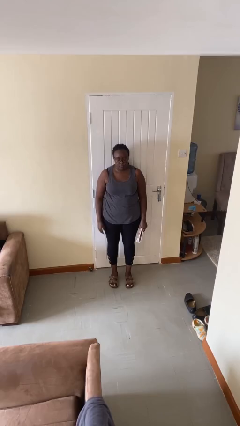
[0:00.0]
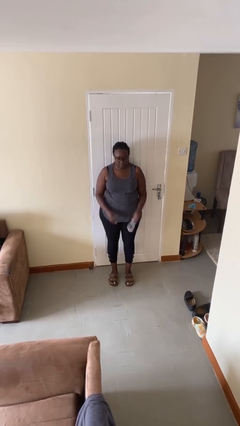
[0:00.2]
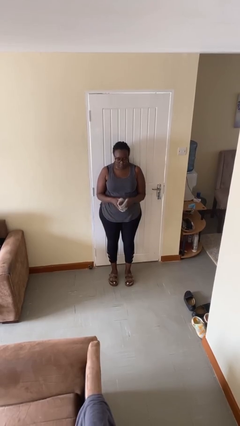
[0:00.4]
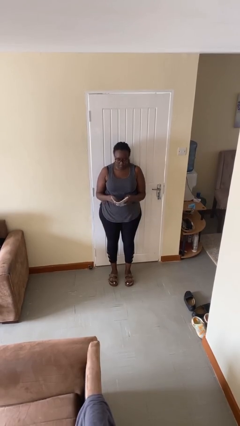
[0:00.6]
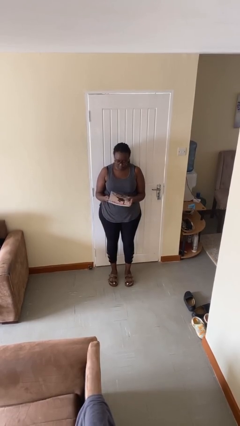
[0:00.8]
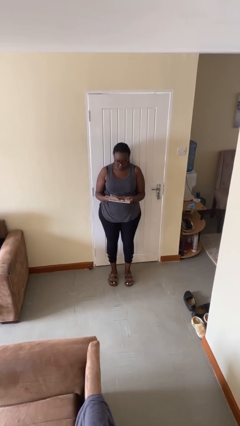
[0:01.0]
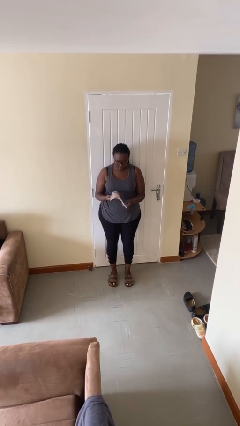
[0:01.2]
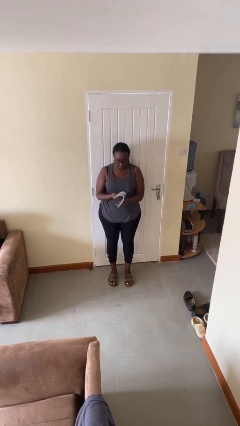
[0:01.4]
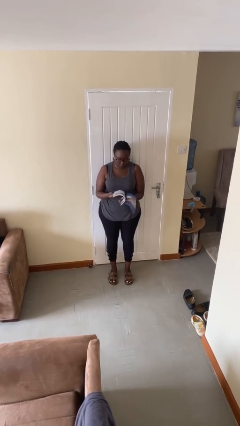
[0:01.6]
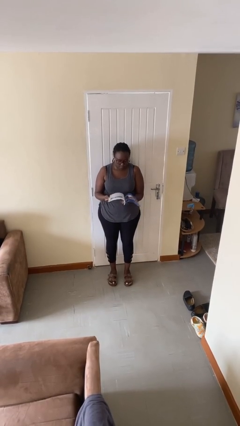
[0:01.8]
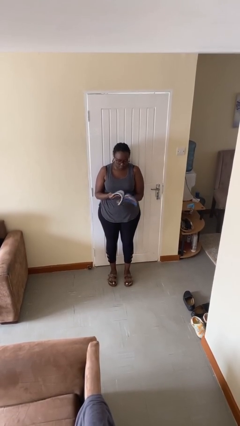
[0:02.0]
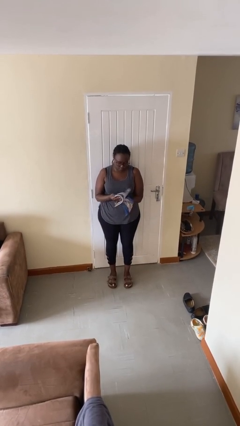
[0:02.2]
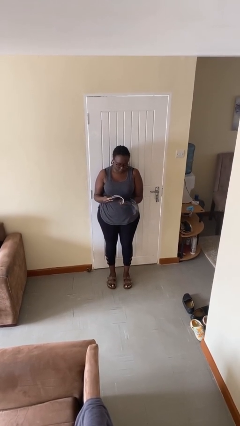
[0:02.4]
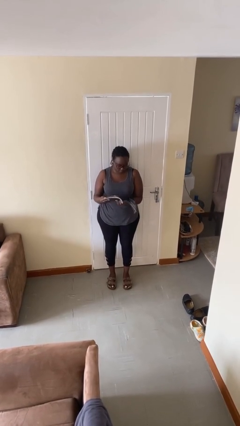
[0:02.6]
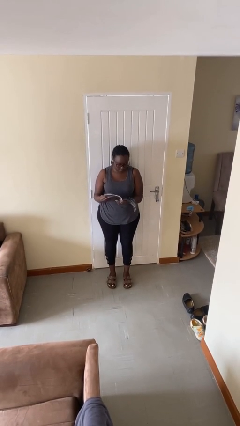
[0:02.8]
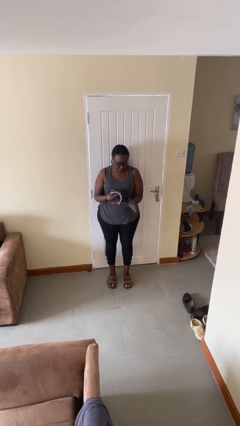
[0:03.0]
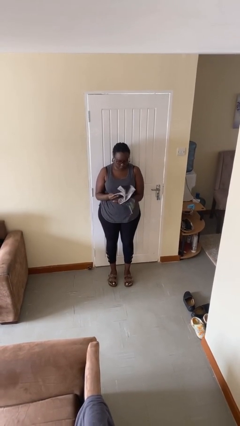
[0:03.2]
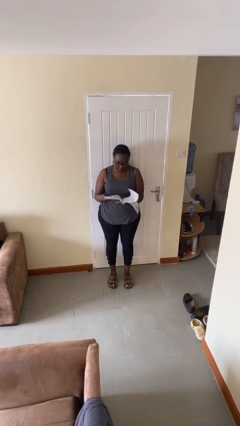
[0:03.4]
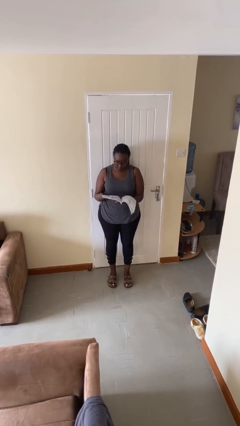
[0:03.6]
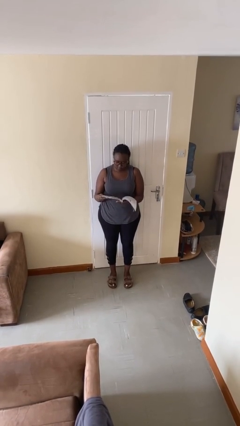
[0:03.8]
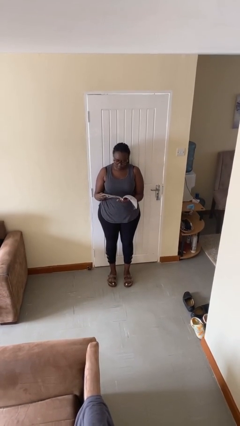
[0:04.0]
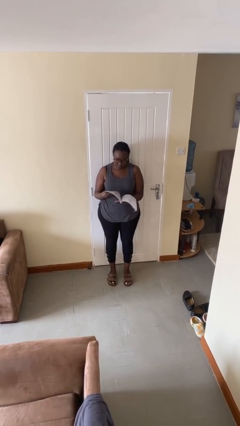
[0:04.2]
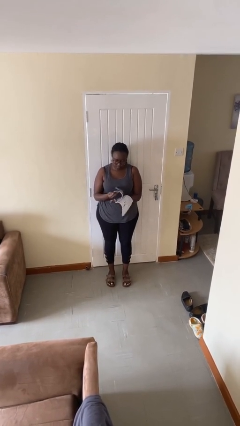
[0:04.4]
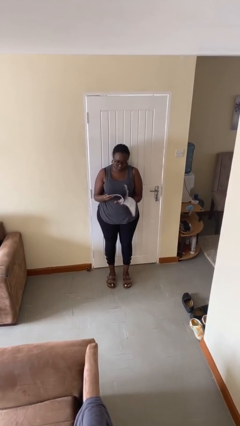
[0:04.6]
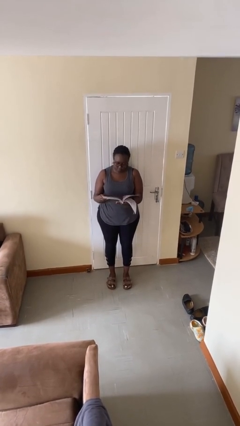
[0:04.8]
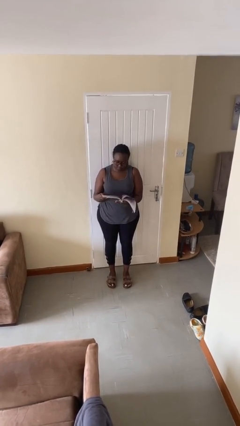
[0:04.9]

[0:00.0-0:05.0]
person reads magazine

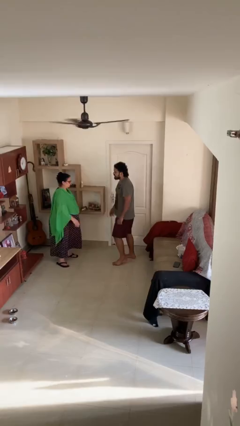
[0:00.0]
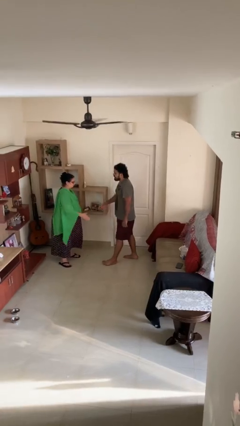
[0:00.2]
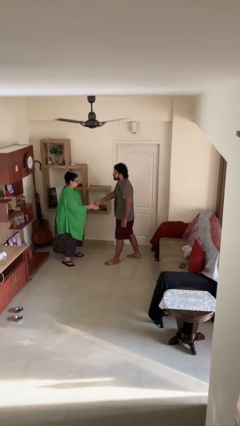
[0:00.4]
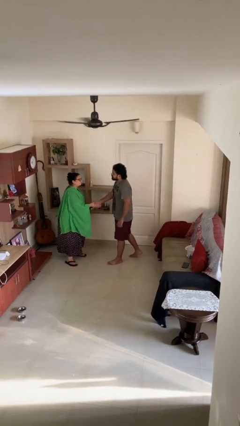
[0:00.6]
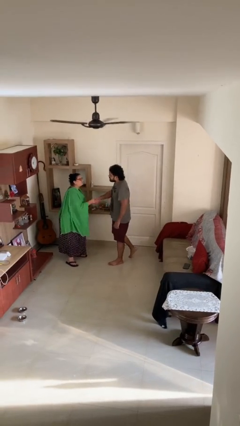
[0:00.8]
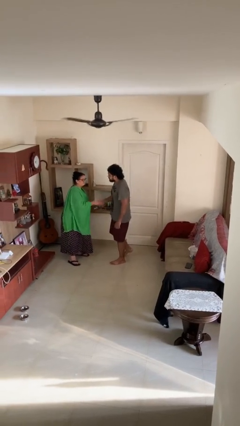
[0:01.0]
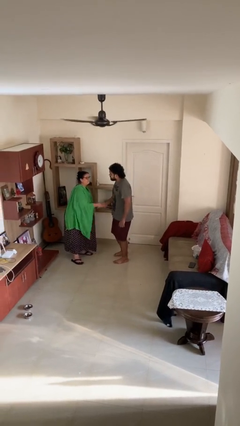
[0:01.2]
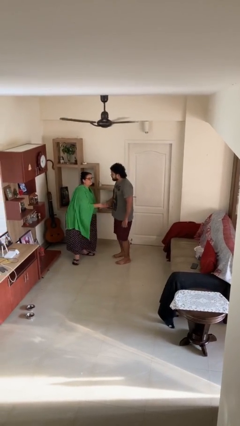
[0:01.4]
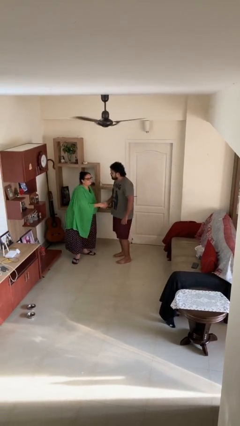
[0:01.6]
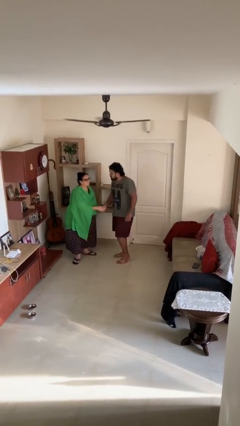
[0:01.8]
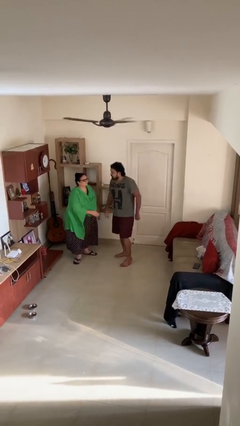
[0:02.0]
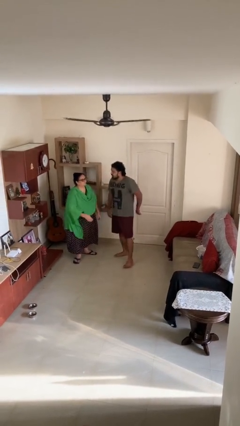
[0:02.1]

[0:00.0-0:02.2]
person shakes hand

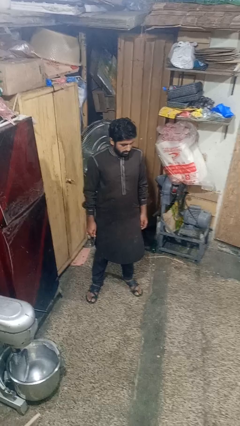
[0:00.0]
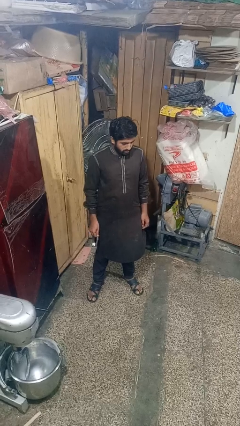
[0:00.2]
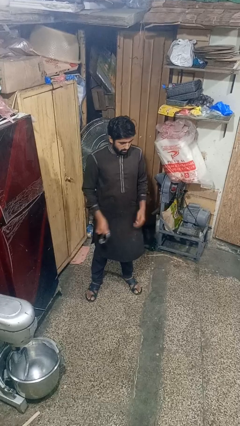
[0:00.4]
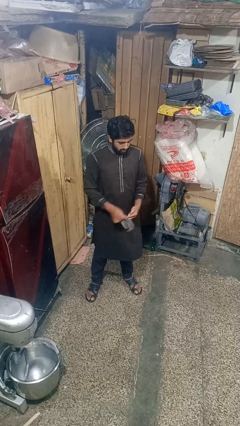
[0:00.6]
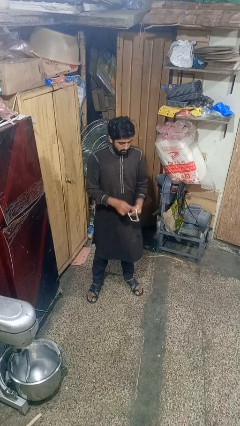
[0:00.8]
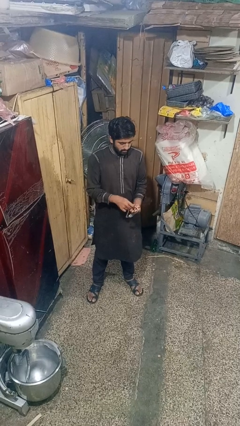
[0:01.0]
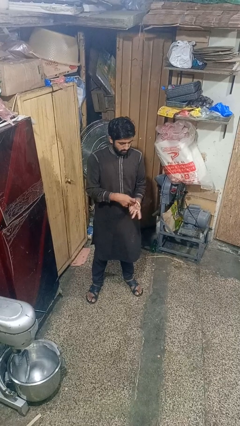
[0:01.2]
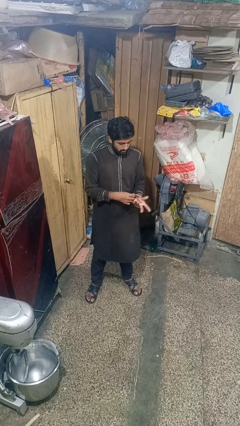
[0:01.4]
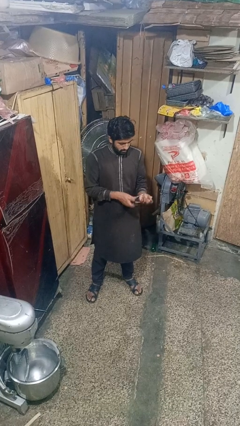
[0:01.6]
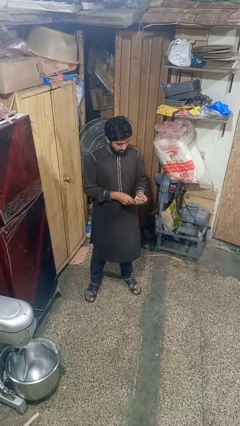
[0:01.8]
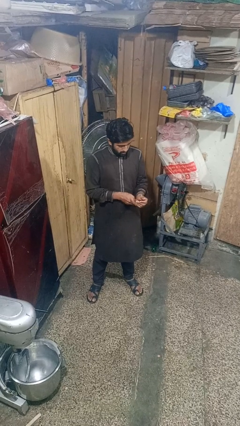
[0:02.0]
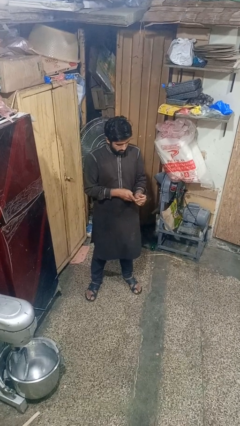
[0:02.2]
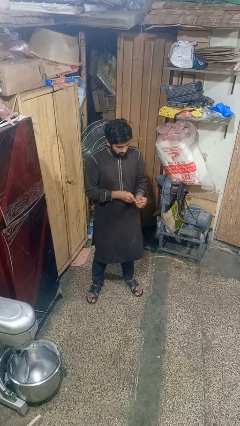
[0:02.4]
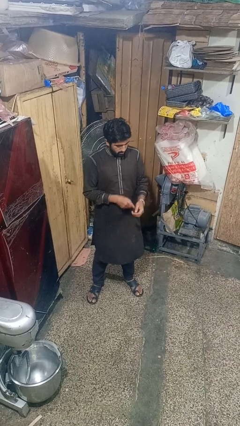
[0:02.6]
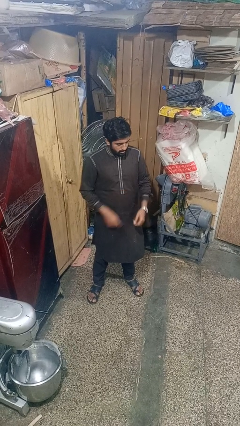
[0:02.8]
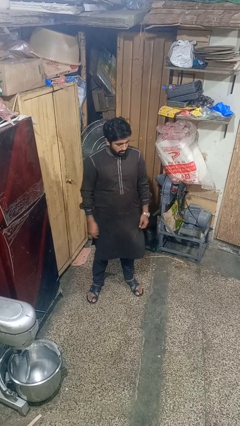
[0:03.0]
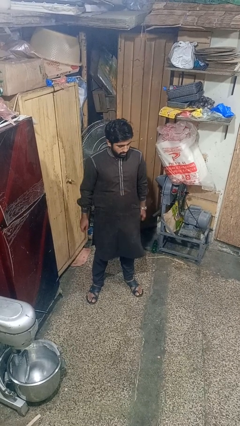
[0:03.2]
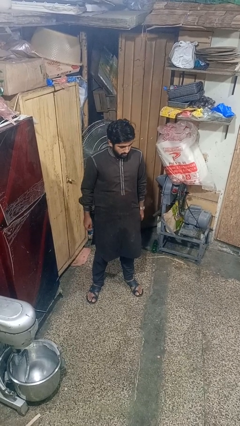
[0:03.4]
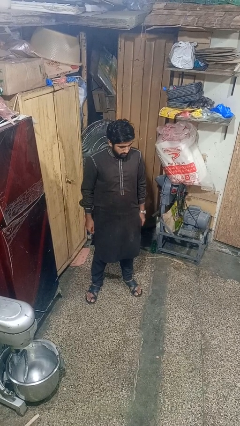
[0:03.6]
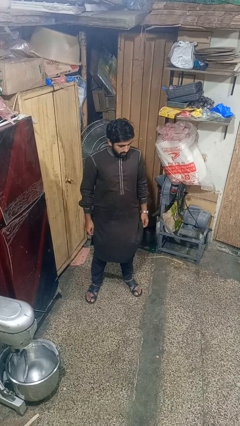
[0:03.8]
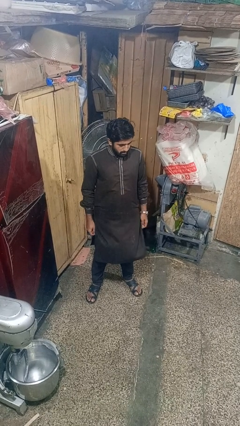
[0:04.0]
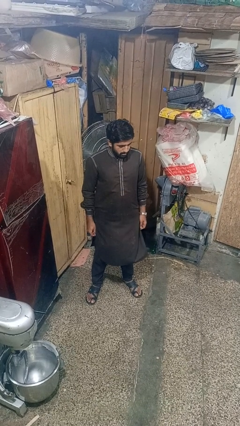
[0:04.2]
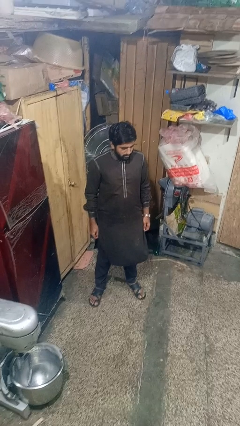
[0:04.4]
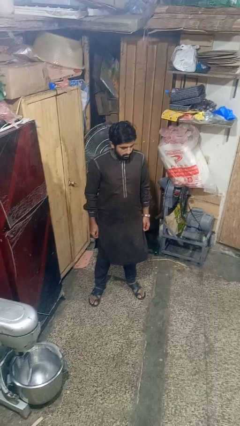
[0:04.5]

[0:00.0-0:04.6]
person puts on wristwatch

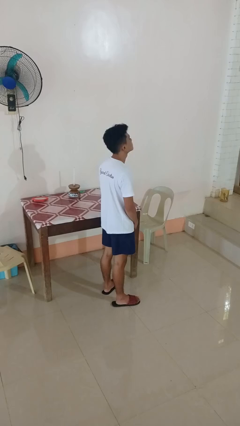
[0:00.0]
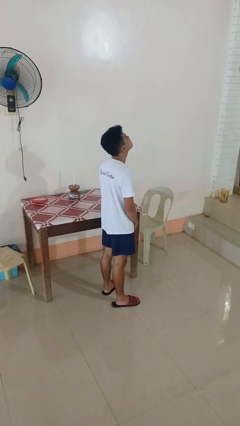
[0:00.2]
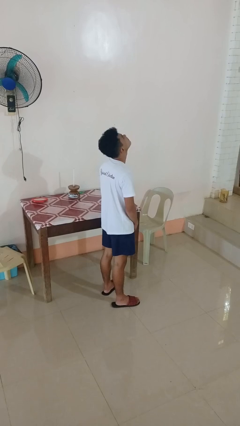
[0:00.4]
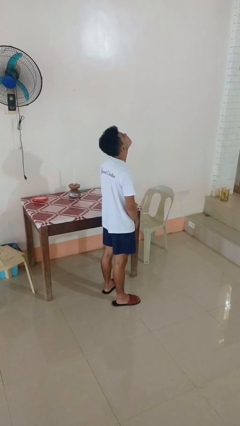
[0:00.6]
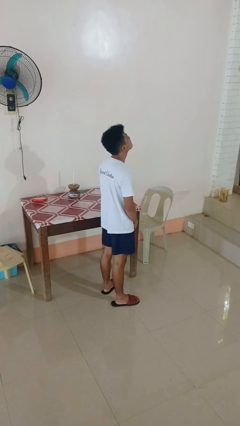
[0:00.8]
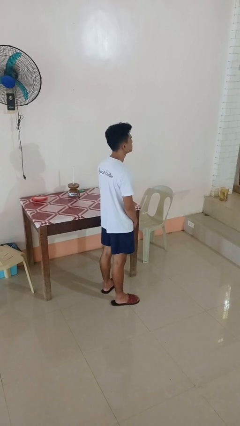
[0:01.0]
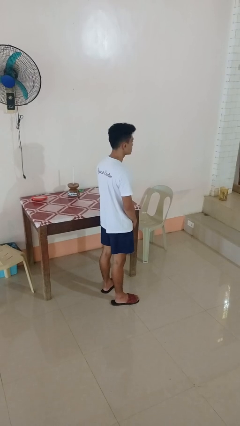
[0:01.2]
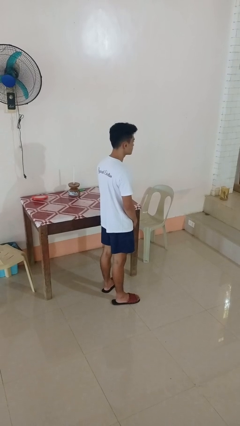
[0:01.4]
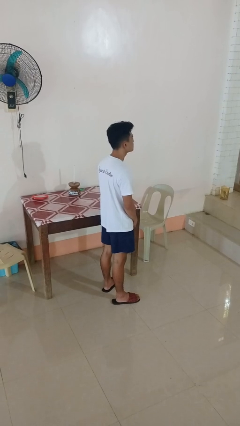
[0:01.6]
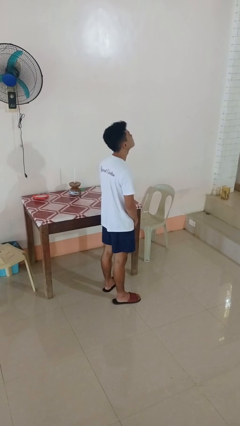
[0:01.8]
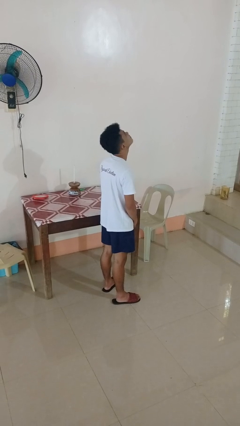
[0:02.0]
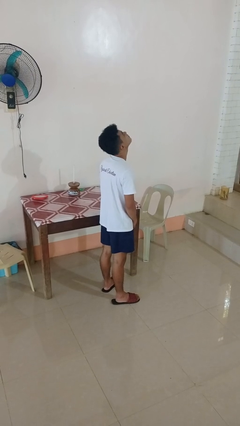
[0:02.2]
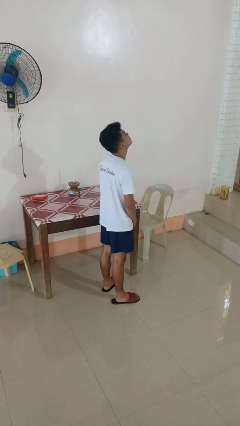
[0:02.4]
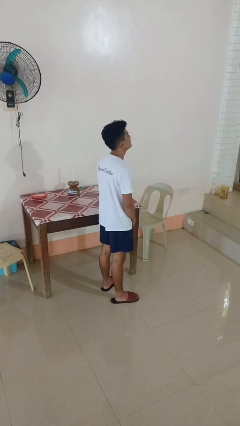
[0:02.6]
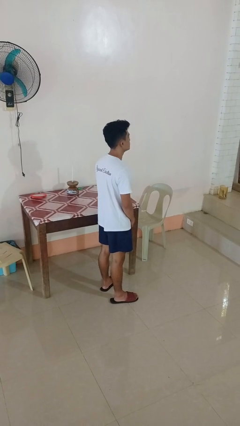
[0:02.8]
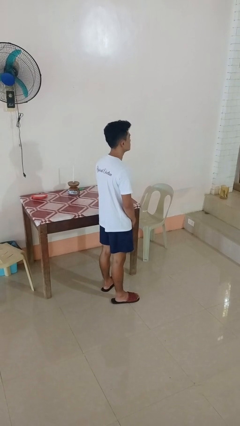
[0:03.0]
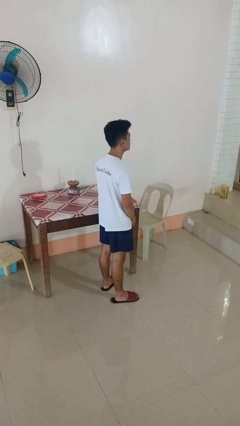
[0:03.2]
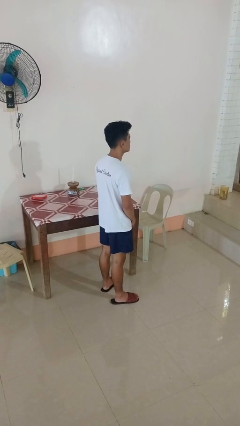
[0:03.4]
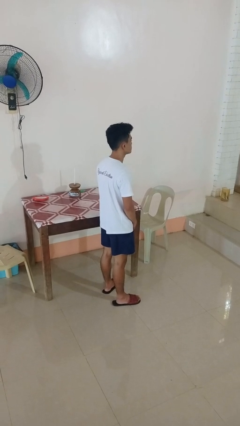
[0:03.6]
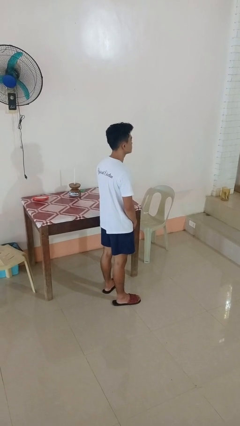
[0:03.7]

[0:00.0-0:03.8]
person nods head

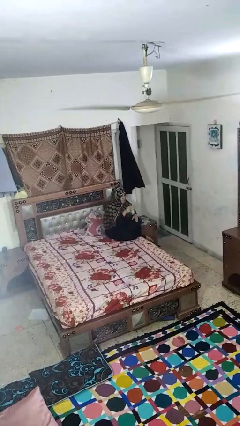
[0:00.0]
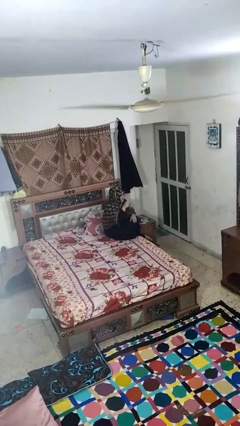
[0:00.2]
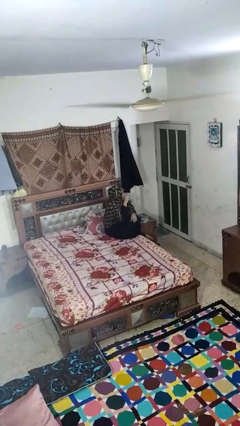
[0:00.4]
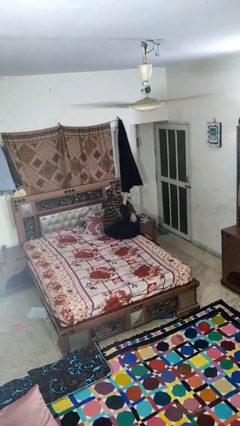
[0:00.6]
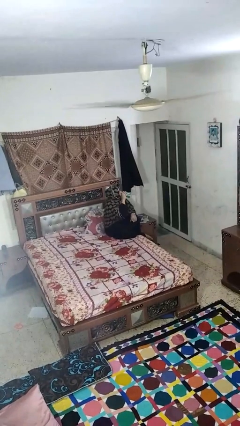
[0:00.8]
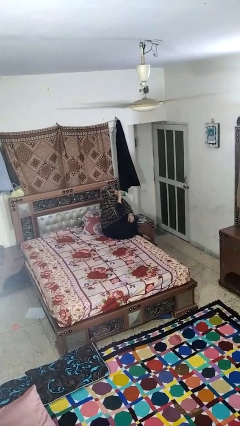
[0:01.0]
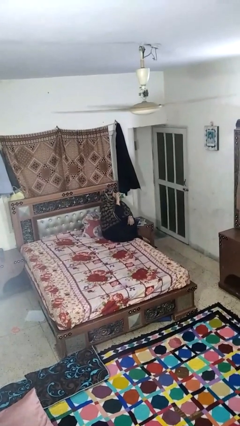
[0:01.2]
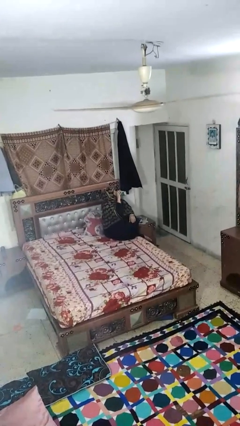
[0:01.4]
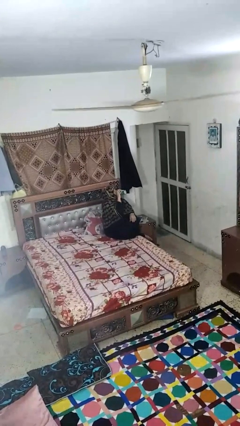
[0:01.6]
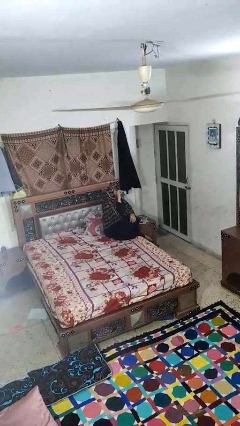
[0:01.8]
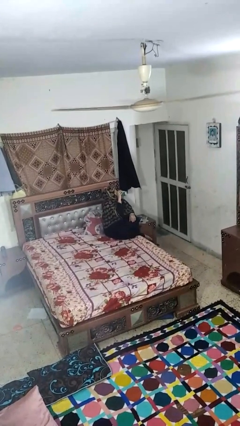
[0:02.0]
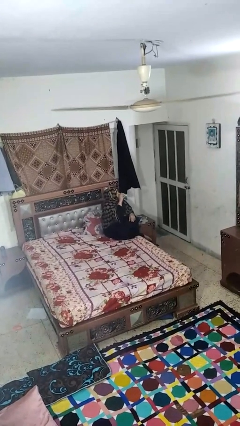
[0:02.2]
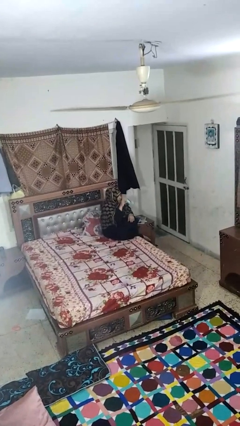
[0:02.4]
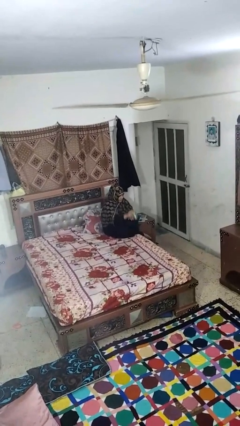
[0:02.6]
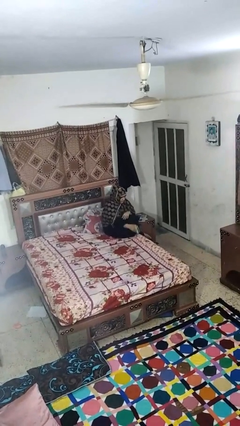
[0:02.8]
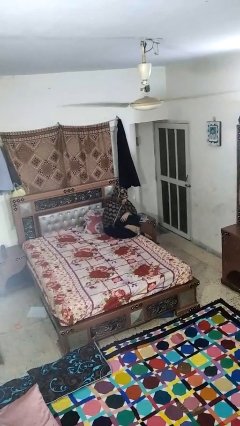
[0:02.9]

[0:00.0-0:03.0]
person drinks from beverage can
